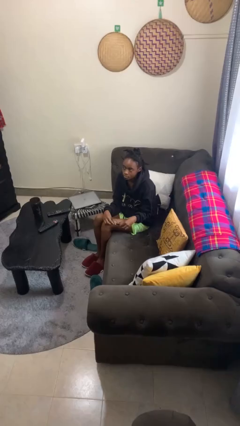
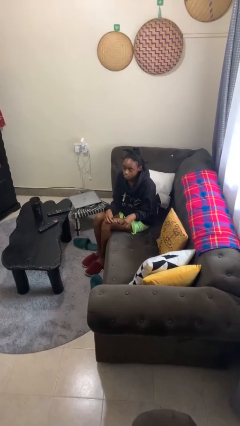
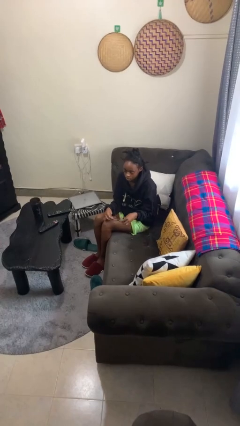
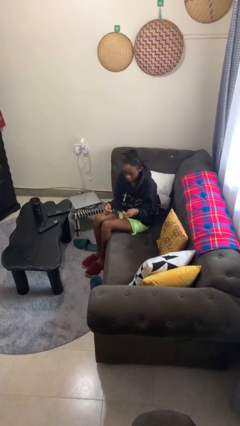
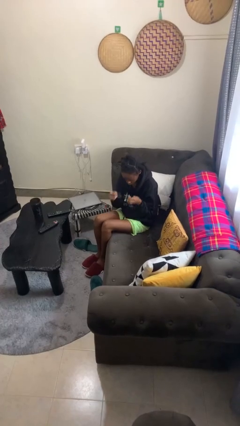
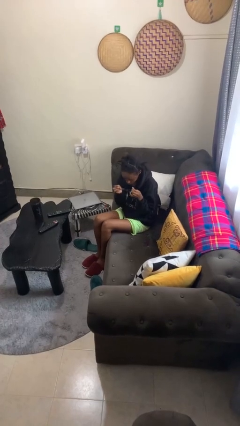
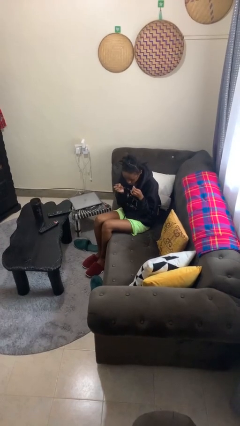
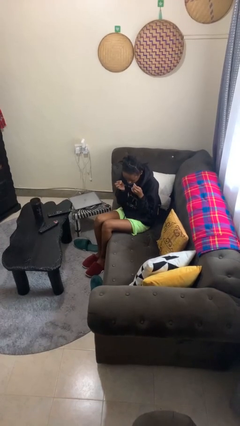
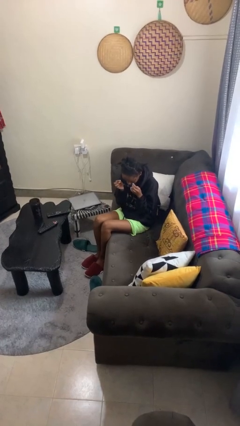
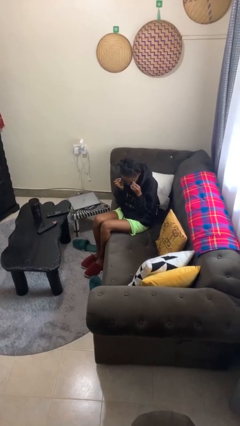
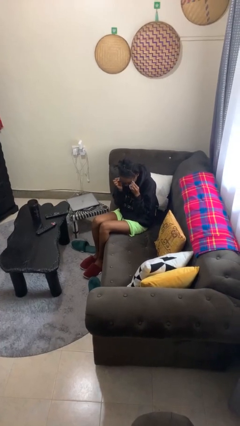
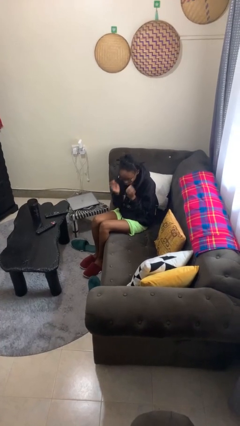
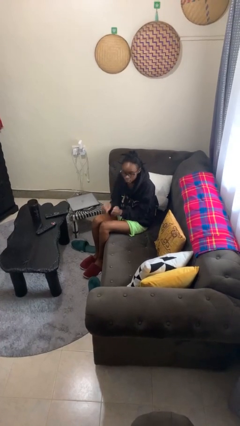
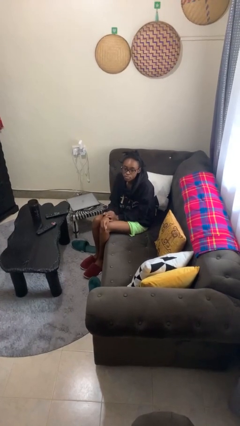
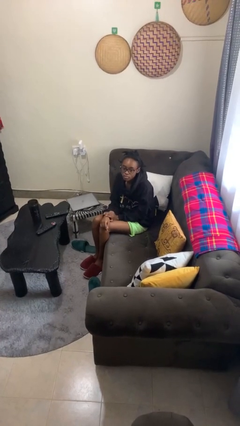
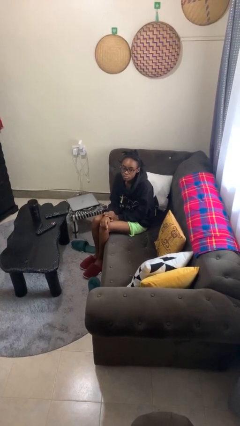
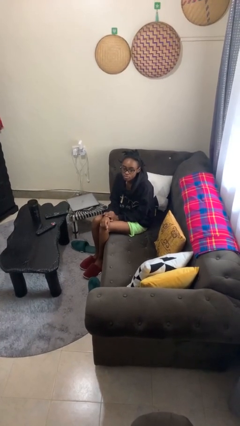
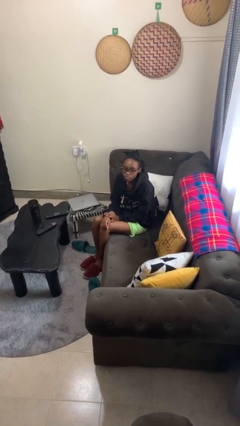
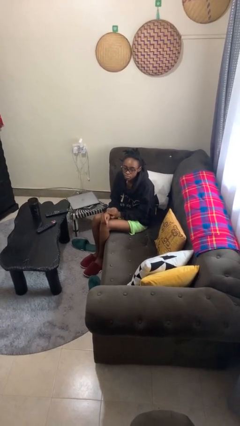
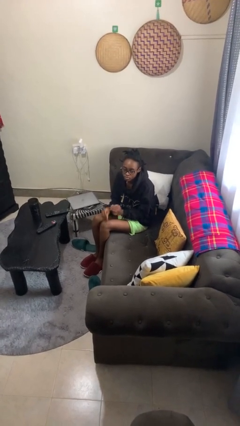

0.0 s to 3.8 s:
person puts on glasses

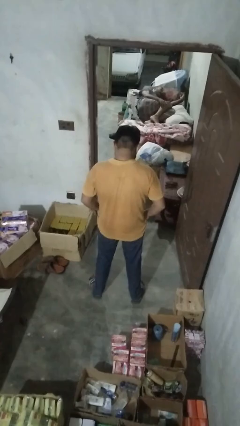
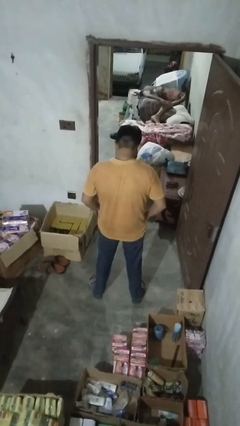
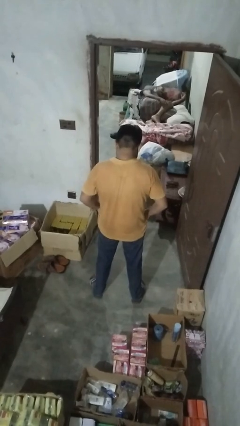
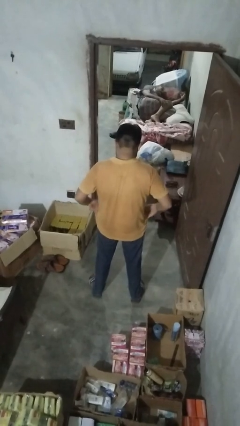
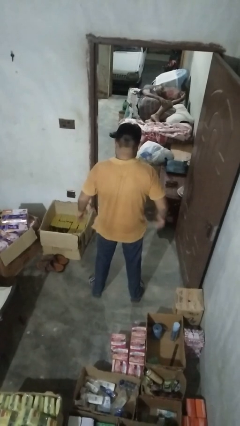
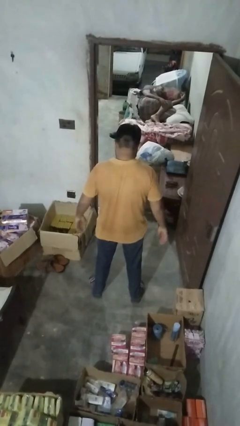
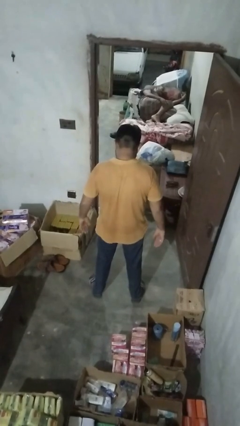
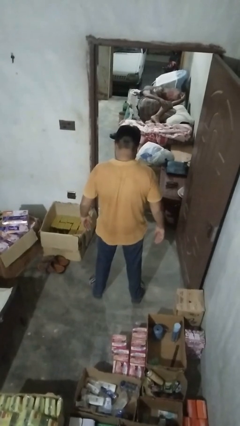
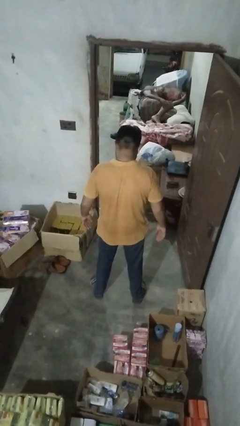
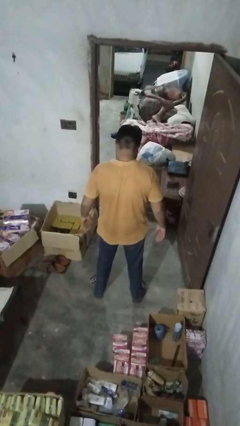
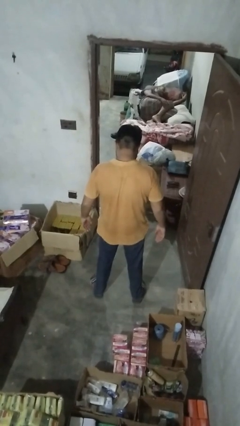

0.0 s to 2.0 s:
person puts hands in back pockets

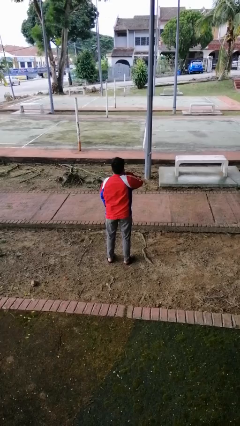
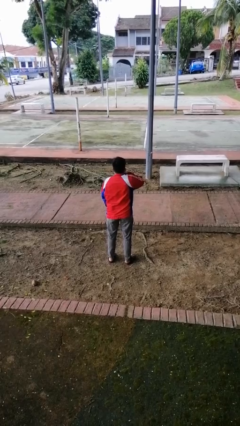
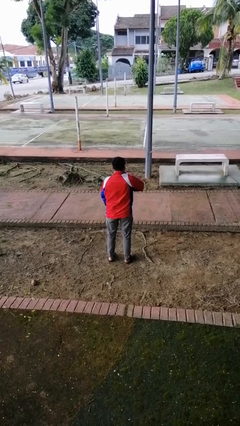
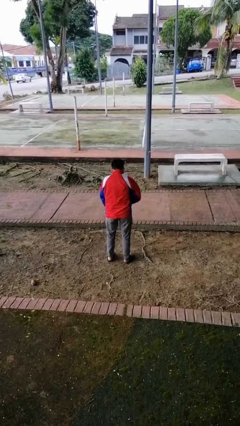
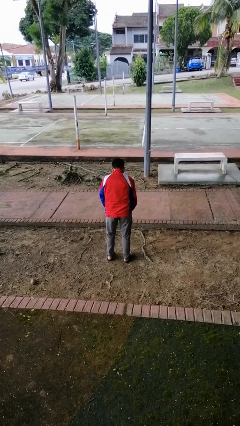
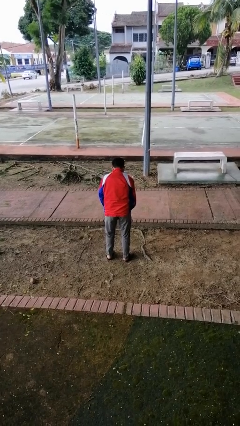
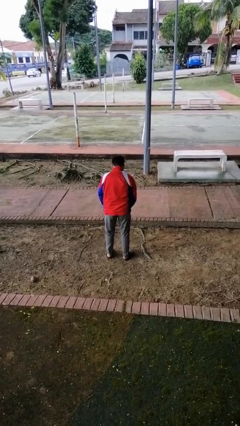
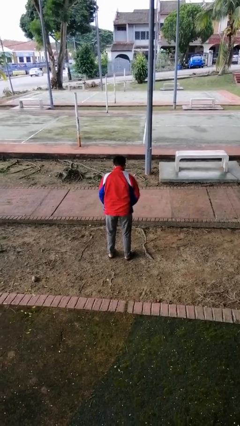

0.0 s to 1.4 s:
person unzips jacket

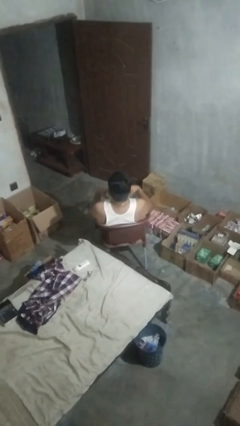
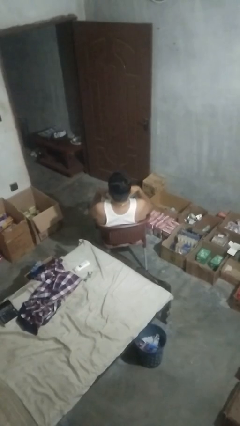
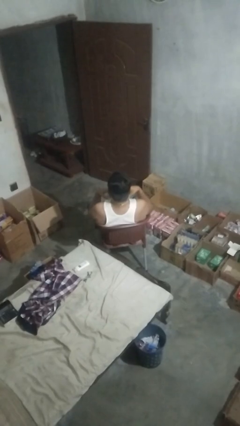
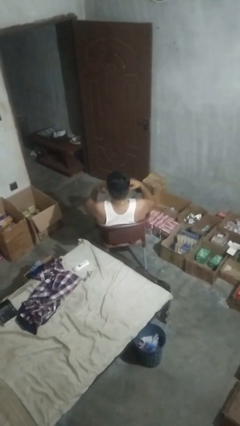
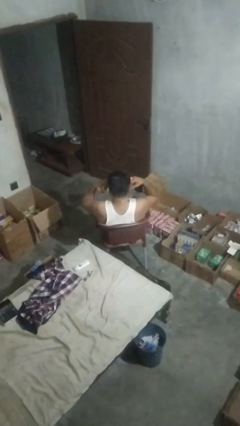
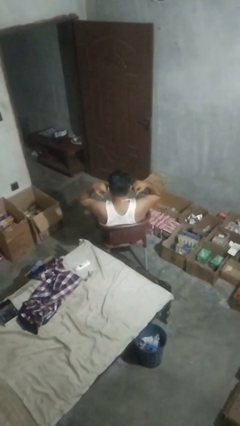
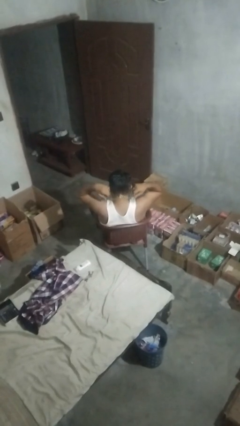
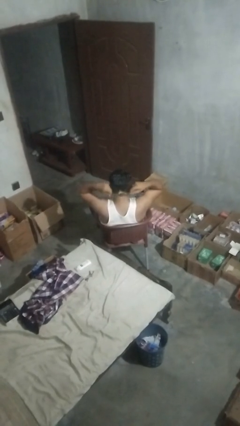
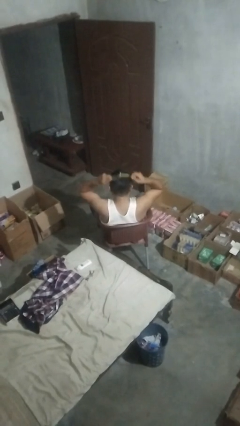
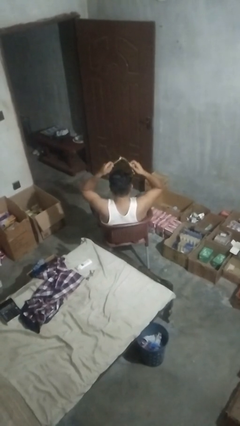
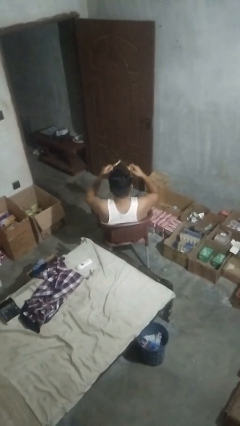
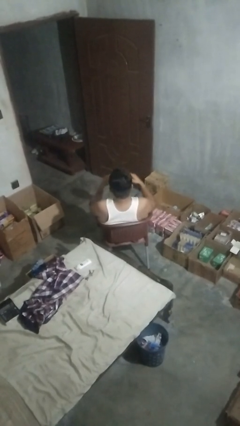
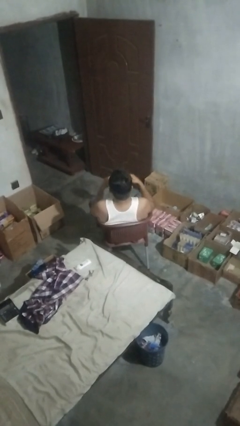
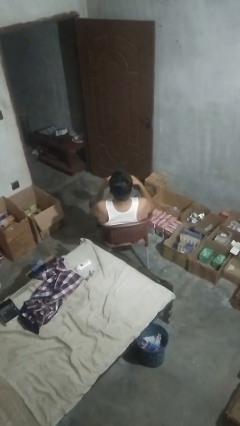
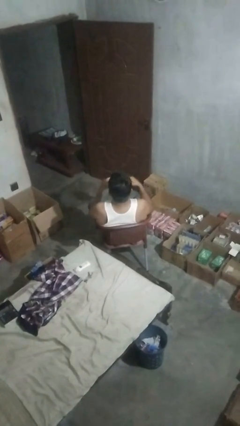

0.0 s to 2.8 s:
person takes off necklace

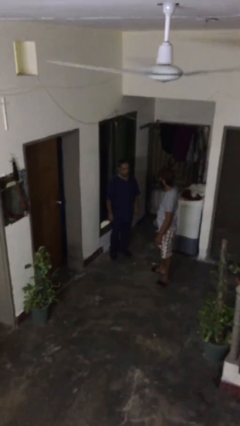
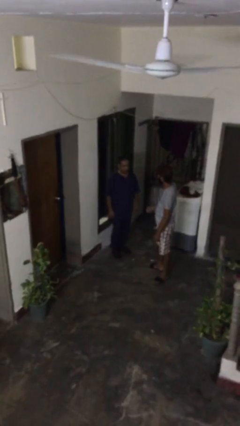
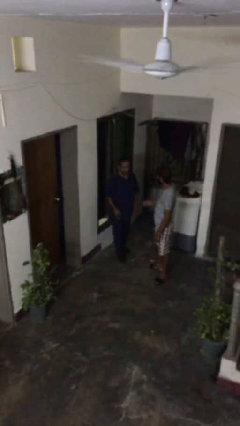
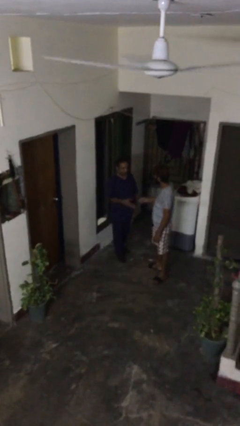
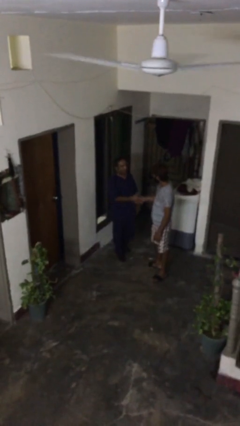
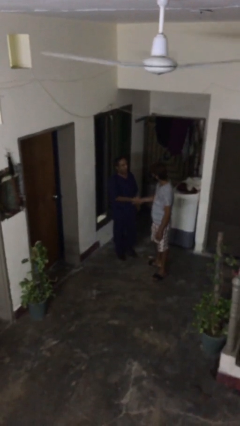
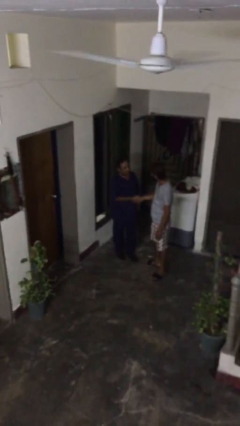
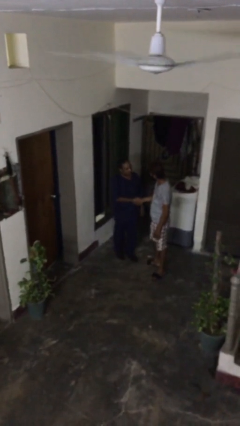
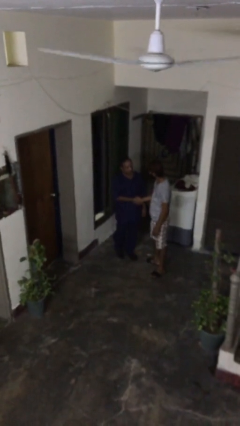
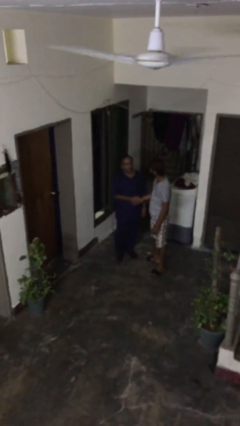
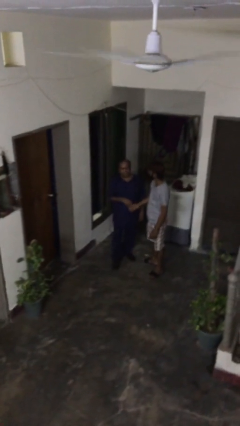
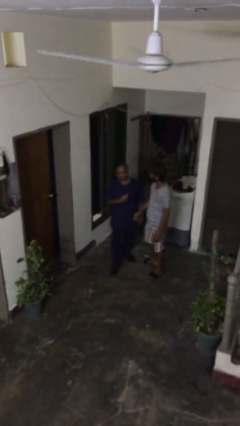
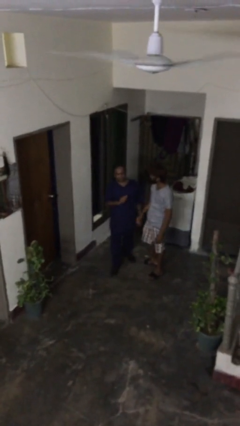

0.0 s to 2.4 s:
person shakes hand

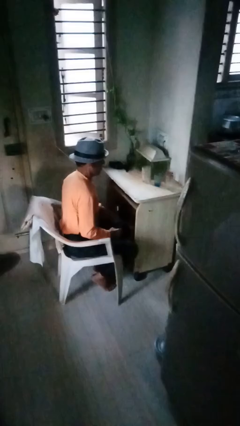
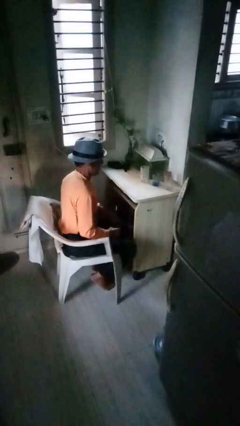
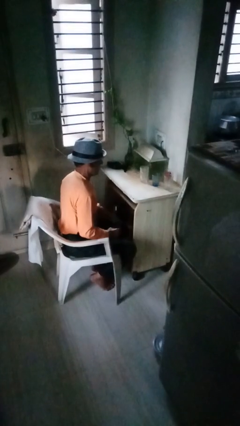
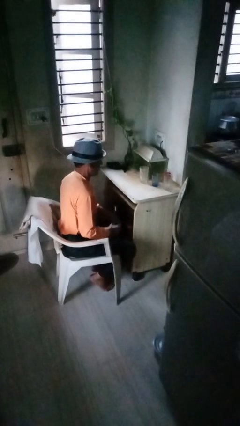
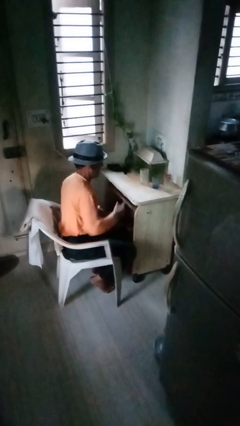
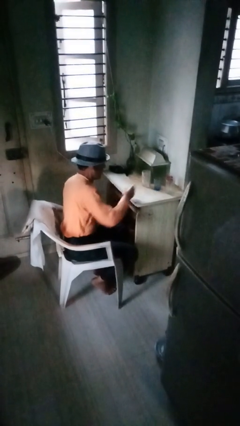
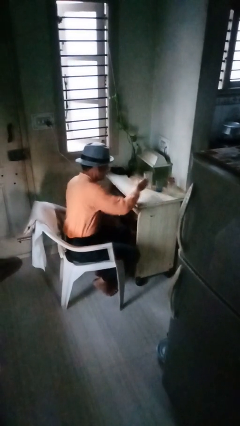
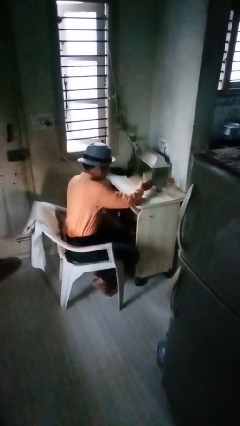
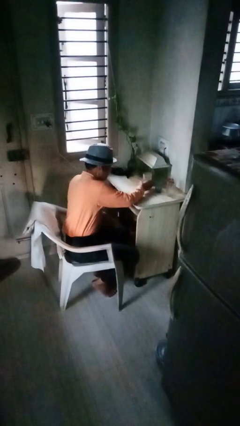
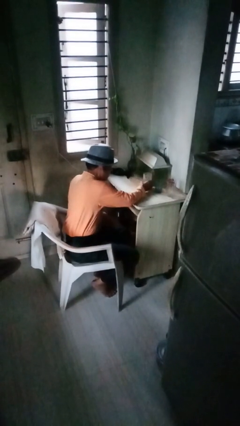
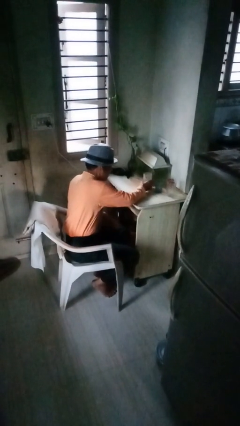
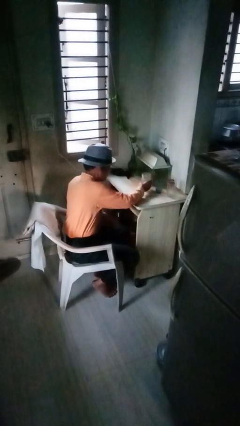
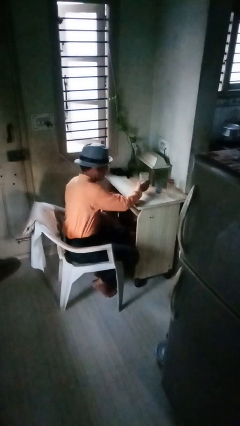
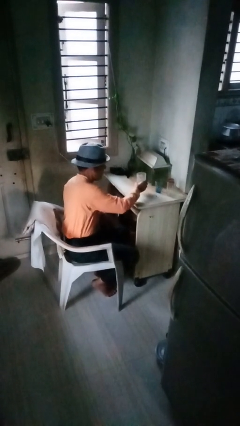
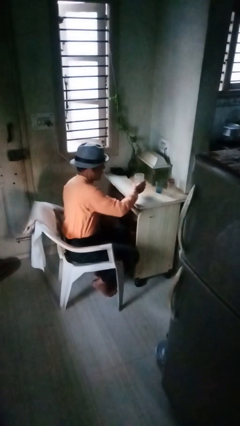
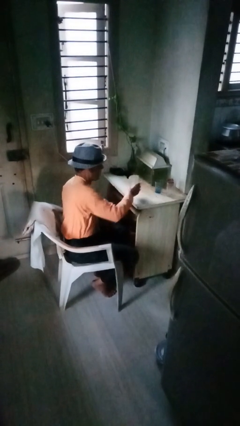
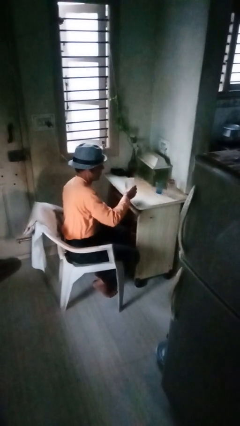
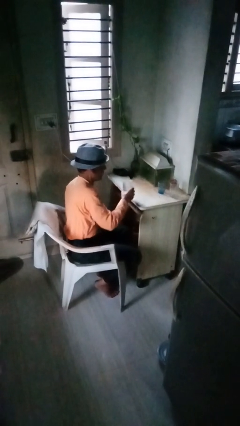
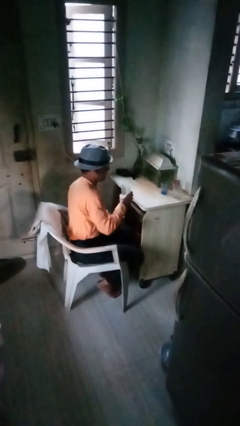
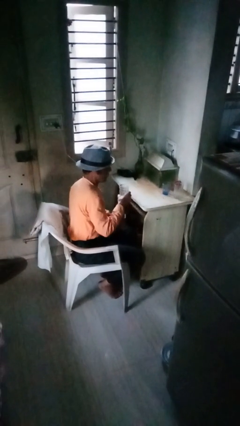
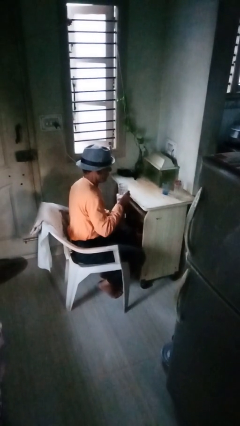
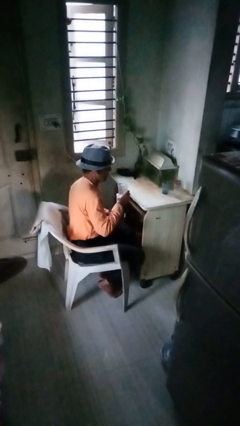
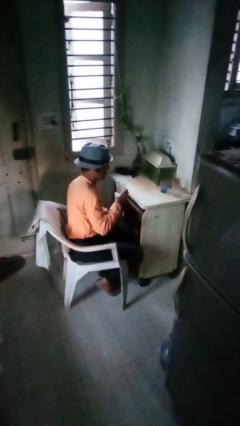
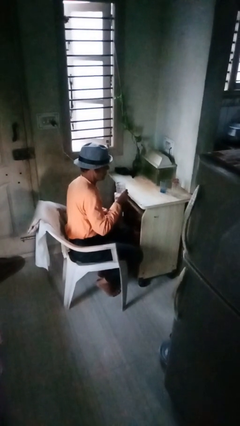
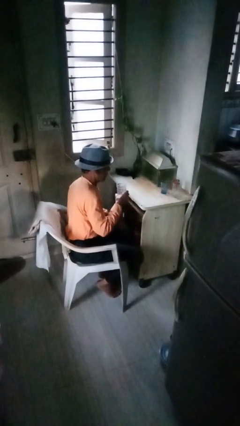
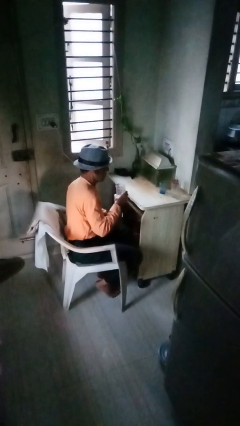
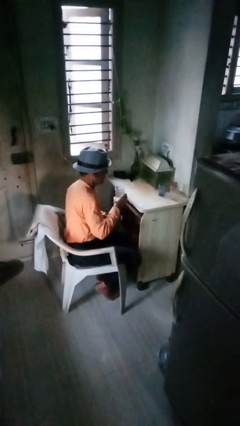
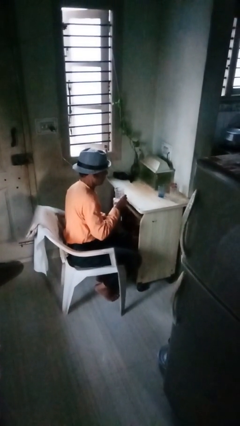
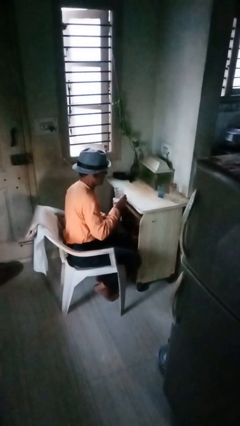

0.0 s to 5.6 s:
person picks up object from table
